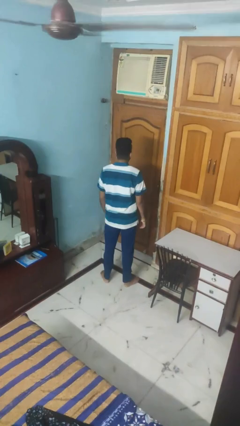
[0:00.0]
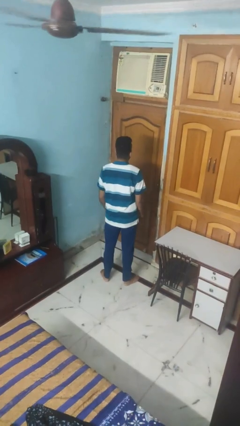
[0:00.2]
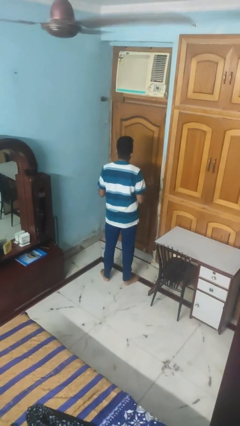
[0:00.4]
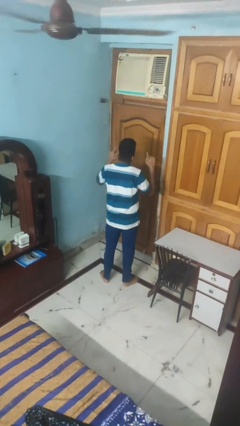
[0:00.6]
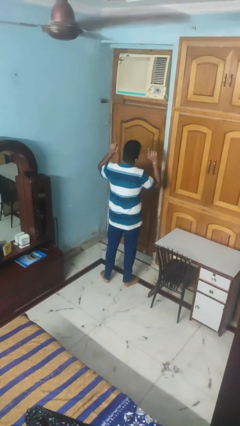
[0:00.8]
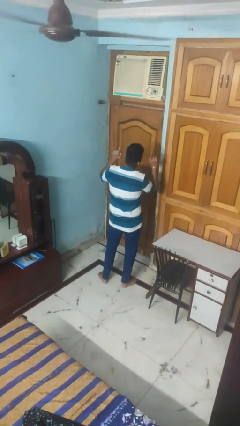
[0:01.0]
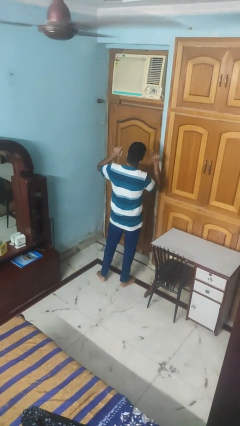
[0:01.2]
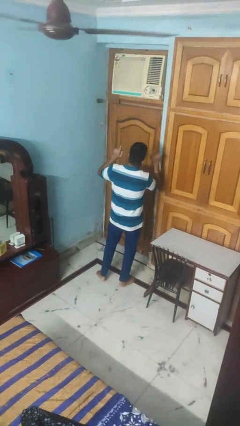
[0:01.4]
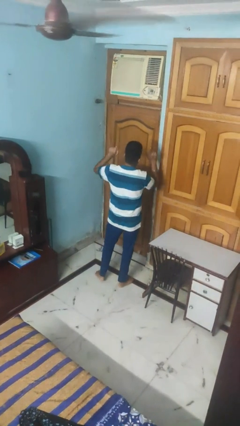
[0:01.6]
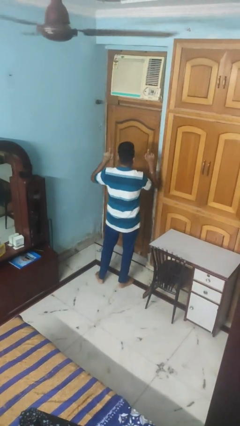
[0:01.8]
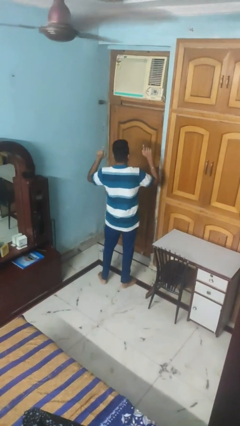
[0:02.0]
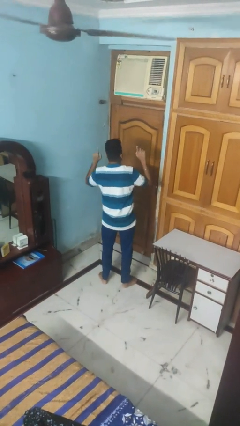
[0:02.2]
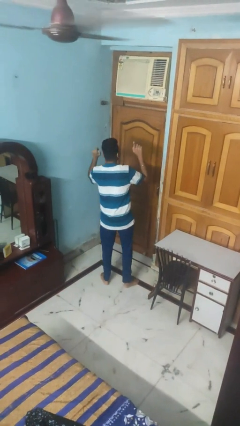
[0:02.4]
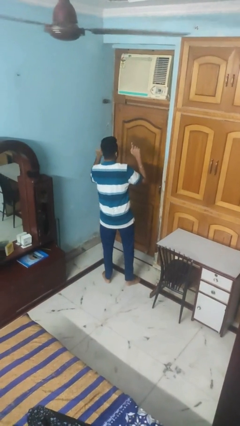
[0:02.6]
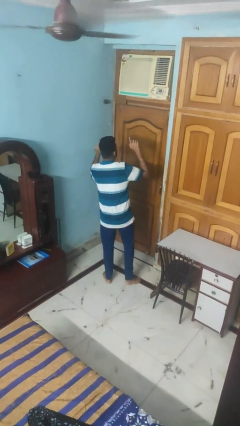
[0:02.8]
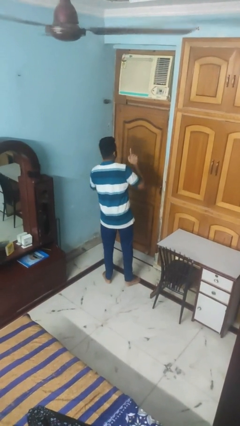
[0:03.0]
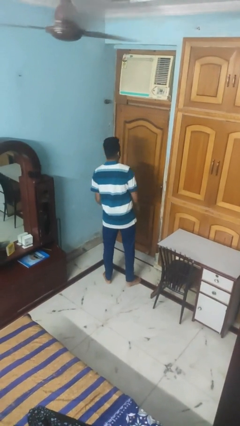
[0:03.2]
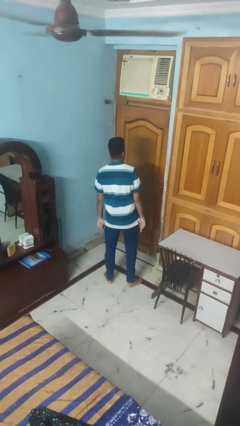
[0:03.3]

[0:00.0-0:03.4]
person dances in place

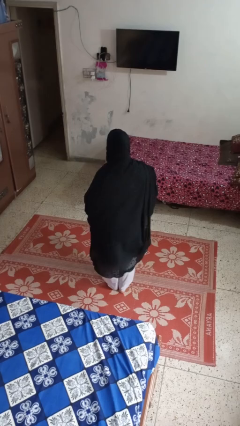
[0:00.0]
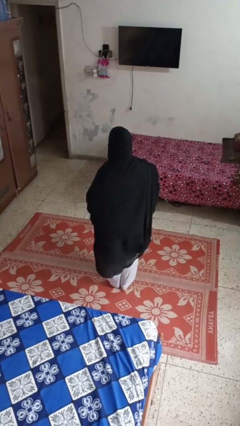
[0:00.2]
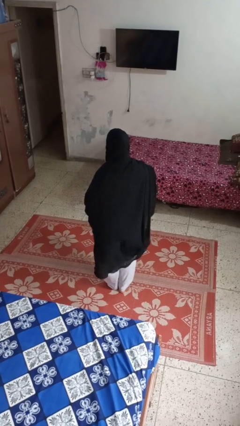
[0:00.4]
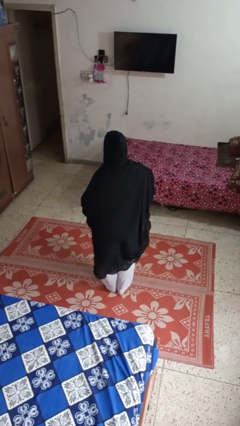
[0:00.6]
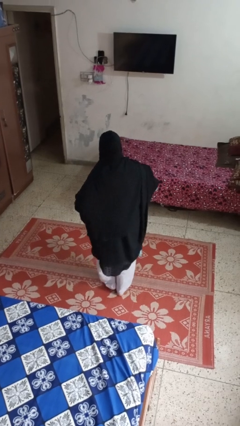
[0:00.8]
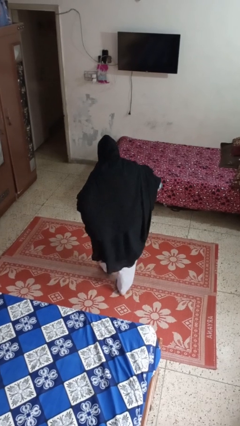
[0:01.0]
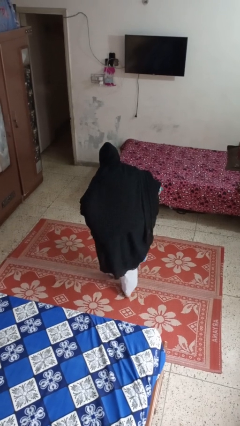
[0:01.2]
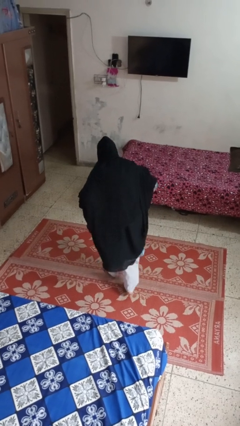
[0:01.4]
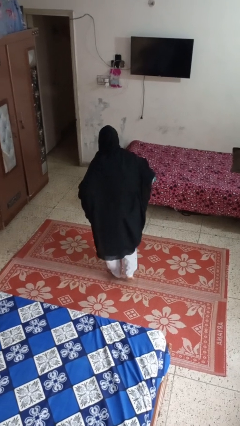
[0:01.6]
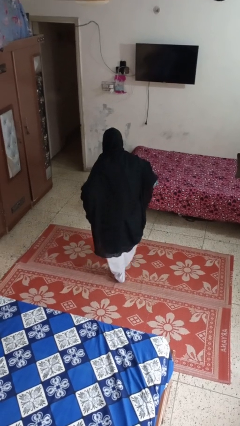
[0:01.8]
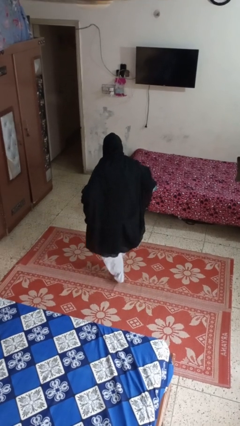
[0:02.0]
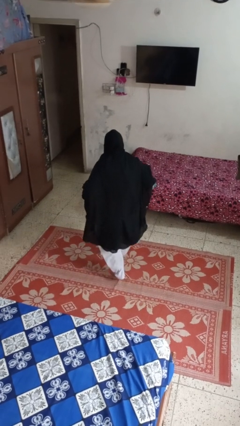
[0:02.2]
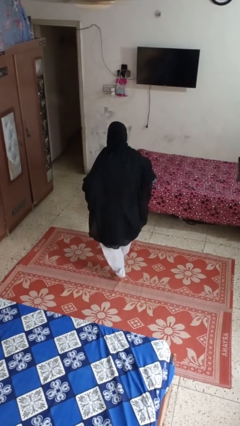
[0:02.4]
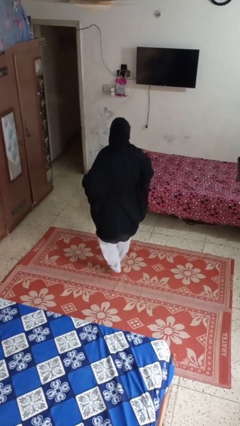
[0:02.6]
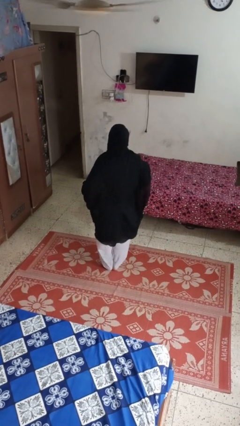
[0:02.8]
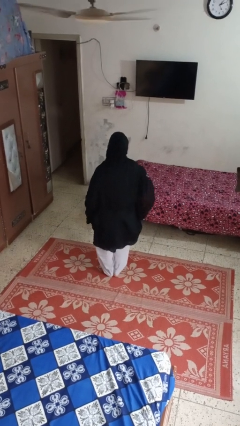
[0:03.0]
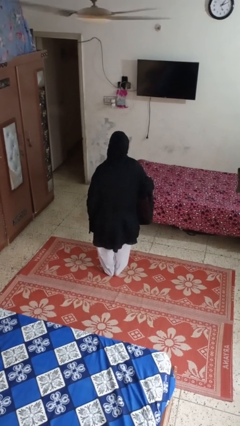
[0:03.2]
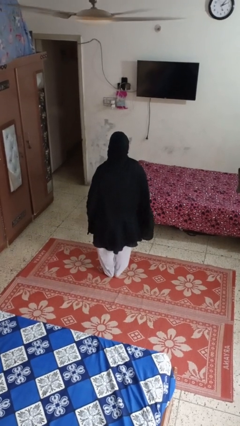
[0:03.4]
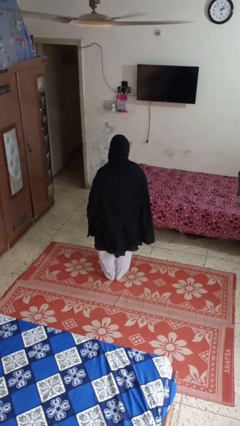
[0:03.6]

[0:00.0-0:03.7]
person walks tiptoe

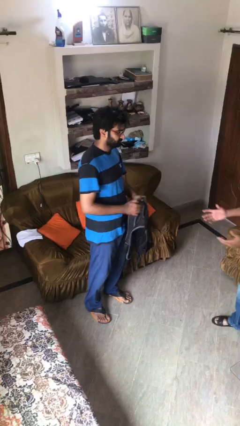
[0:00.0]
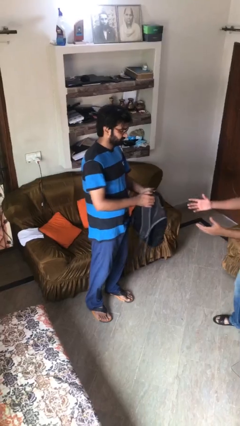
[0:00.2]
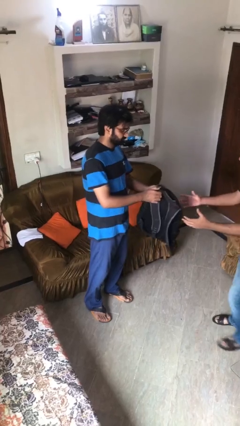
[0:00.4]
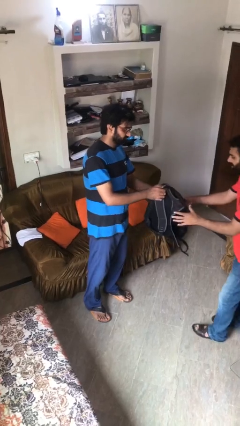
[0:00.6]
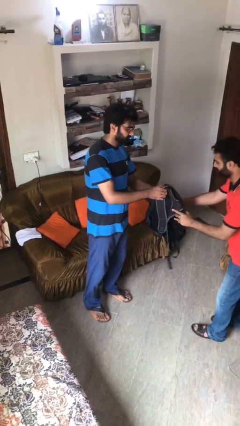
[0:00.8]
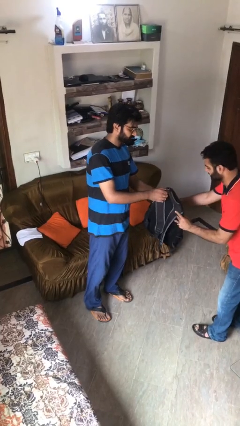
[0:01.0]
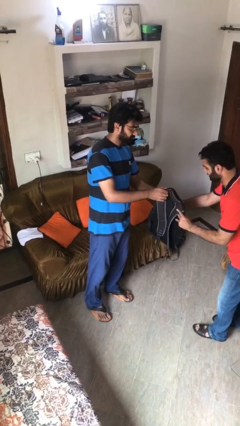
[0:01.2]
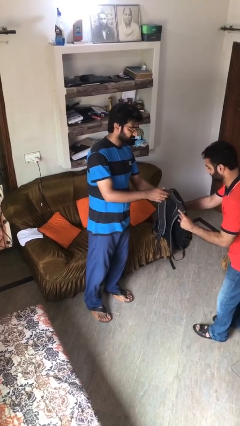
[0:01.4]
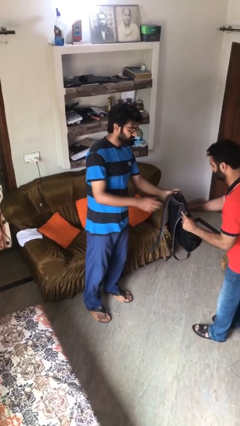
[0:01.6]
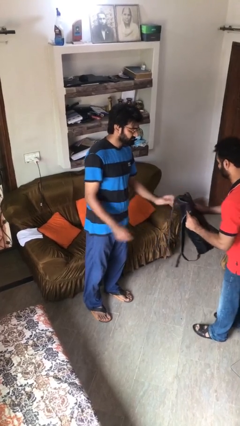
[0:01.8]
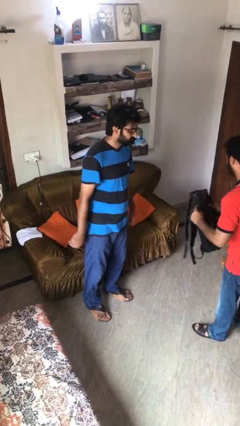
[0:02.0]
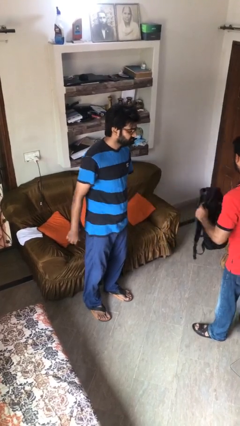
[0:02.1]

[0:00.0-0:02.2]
person transfers object to person

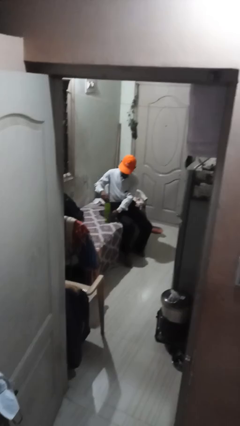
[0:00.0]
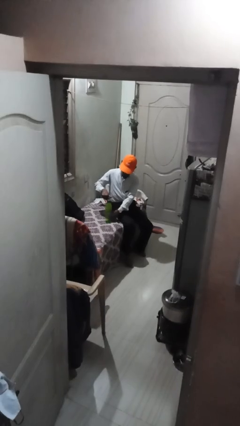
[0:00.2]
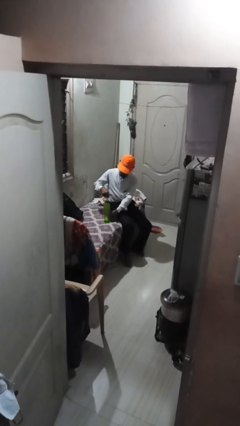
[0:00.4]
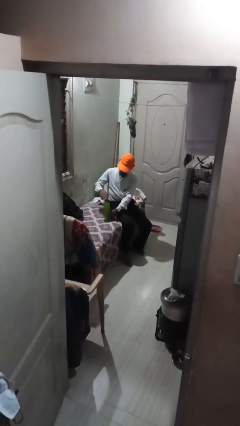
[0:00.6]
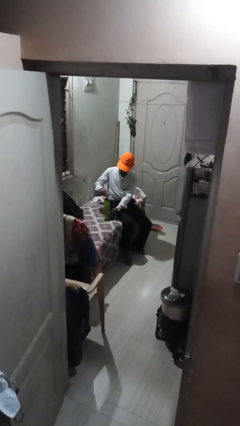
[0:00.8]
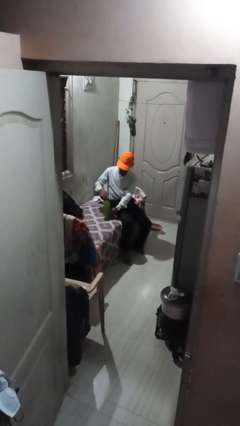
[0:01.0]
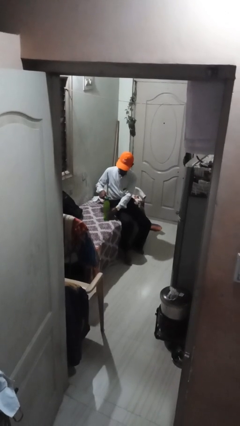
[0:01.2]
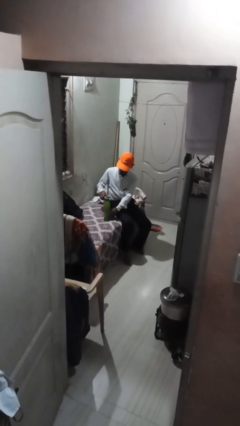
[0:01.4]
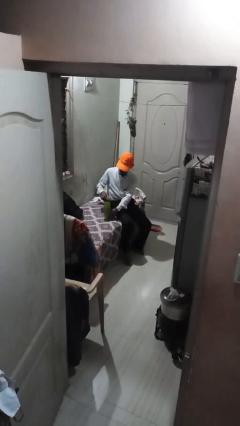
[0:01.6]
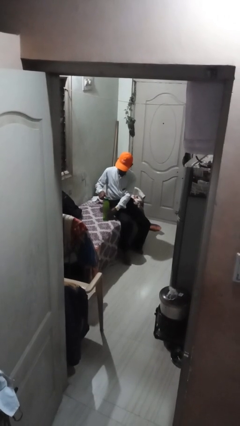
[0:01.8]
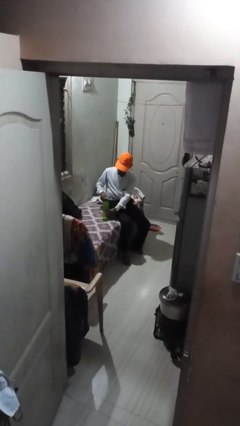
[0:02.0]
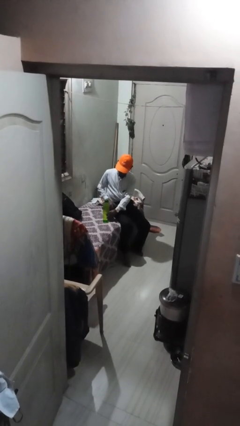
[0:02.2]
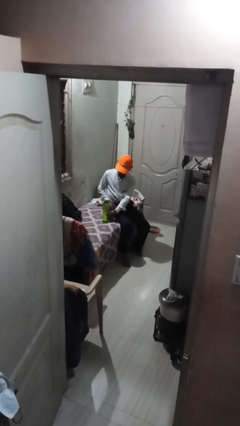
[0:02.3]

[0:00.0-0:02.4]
person screws lid to bottle

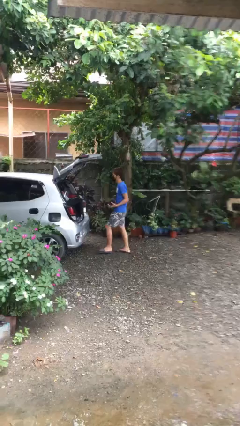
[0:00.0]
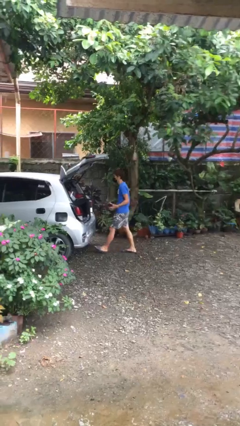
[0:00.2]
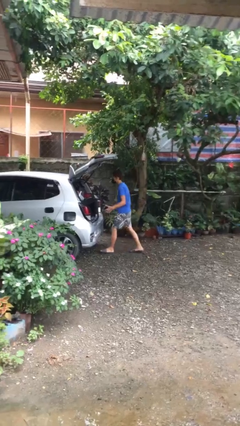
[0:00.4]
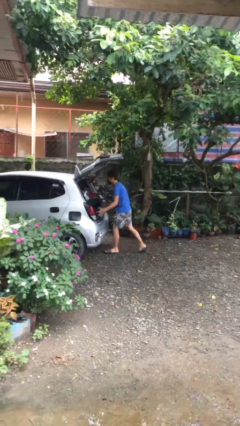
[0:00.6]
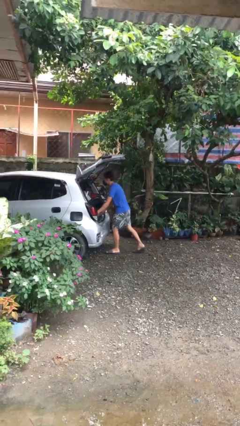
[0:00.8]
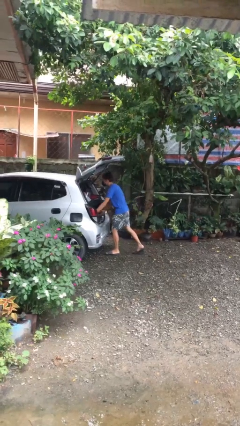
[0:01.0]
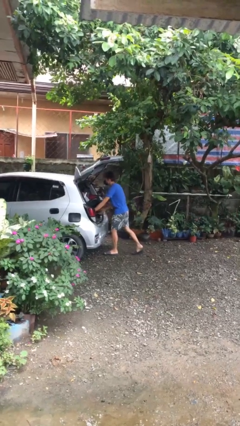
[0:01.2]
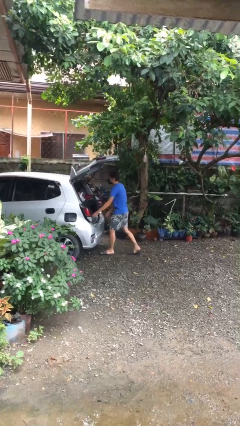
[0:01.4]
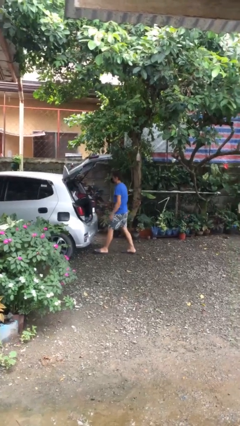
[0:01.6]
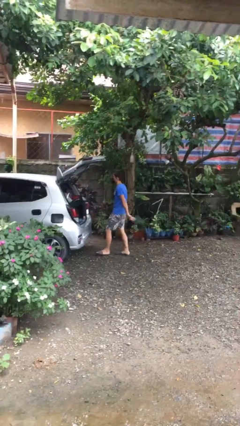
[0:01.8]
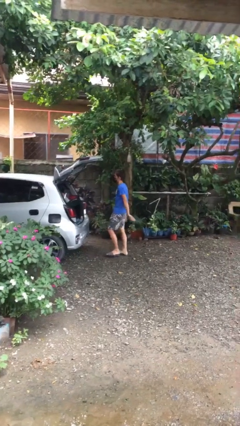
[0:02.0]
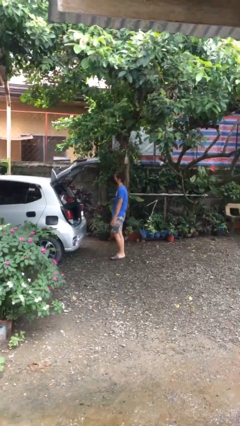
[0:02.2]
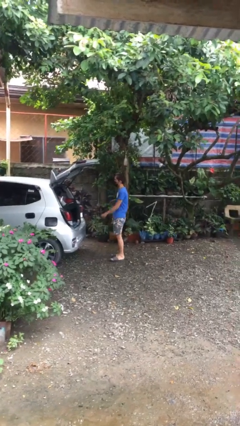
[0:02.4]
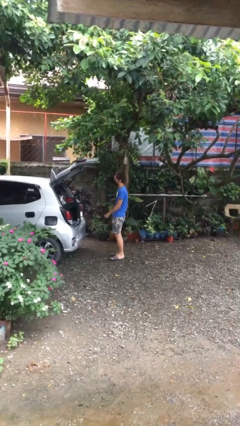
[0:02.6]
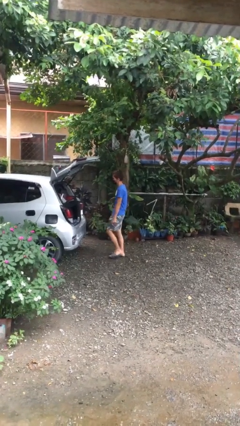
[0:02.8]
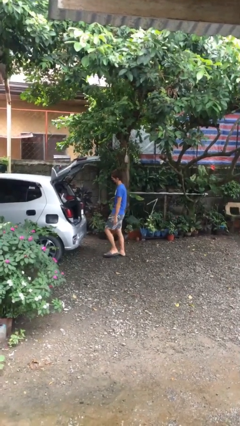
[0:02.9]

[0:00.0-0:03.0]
person loads car

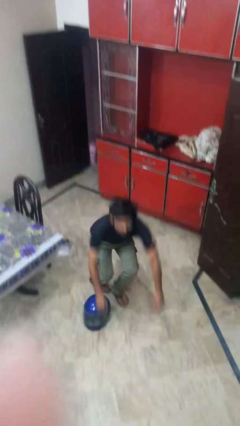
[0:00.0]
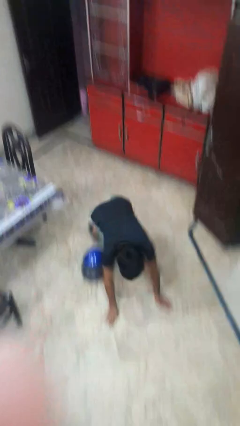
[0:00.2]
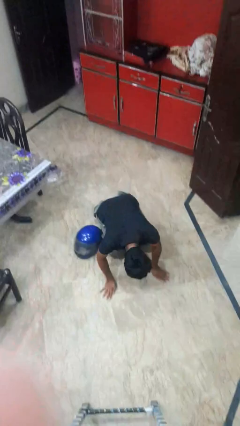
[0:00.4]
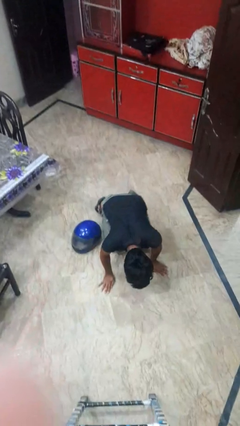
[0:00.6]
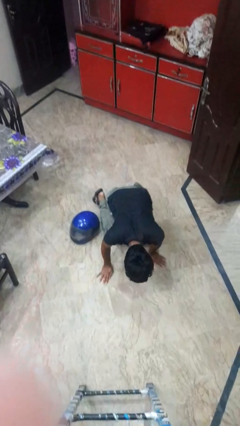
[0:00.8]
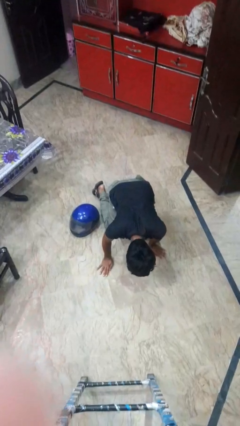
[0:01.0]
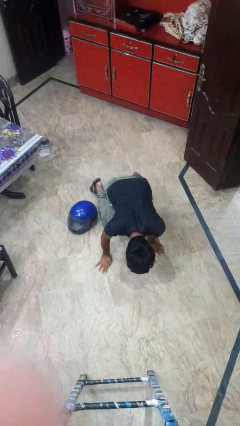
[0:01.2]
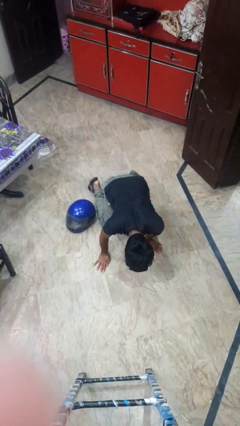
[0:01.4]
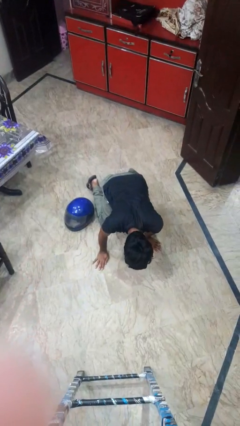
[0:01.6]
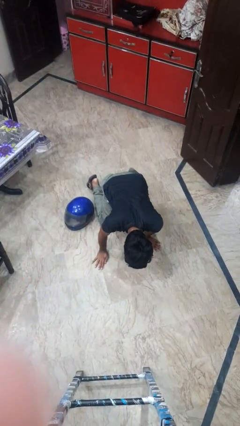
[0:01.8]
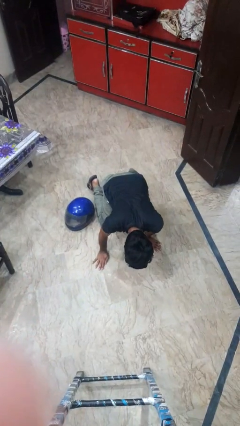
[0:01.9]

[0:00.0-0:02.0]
person trips on object on floor

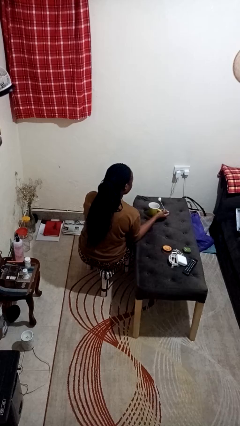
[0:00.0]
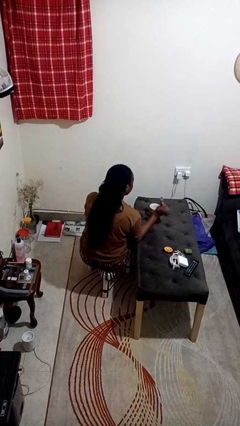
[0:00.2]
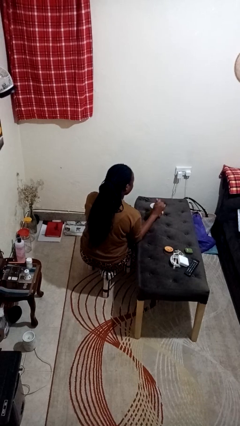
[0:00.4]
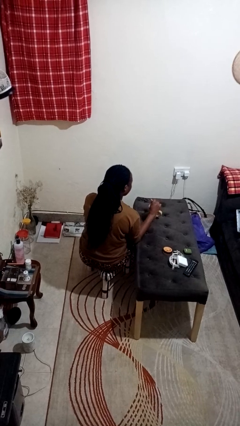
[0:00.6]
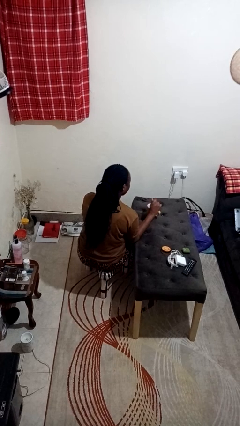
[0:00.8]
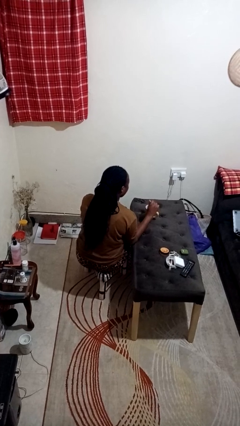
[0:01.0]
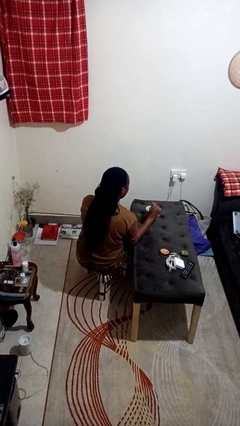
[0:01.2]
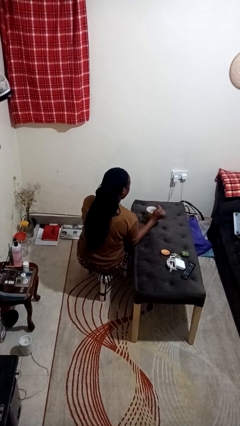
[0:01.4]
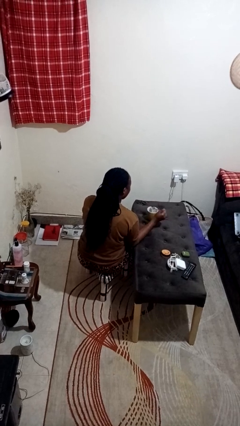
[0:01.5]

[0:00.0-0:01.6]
person stirs mug
